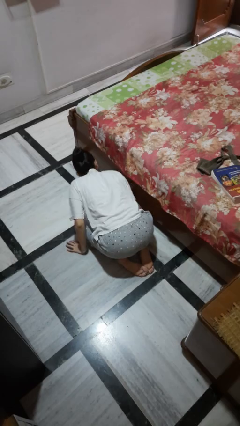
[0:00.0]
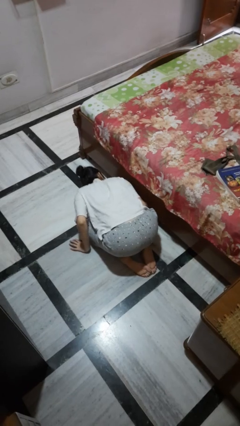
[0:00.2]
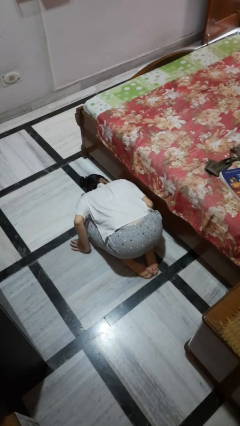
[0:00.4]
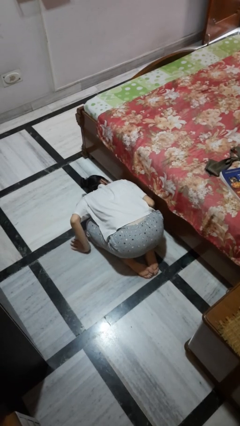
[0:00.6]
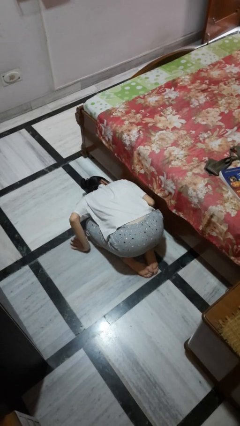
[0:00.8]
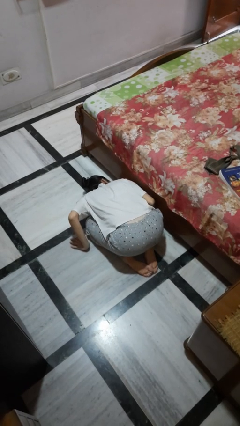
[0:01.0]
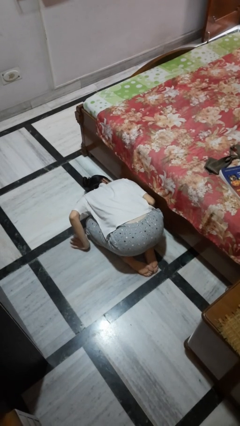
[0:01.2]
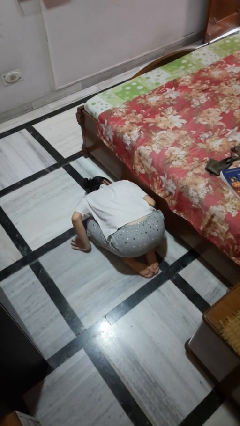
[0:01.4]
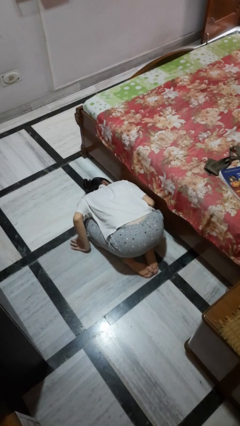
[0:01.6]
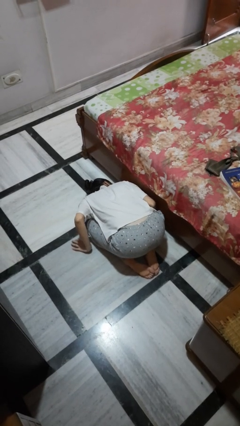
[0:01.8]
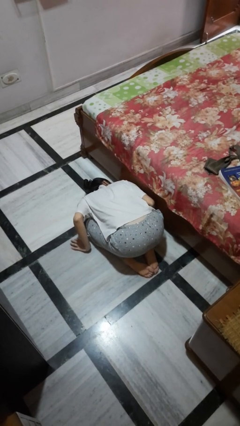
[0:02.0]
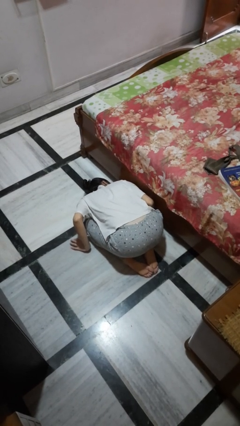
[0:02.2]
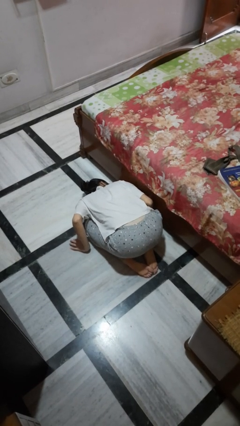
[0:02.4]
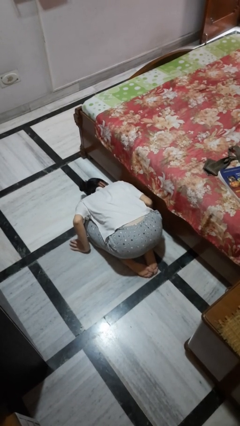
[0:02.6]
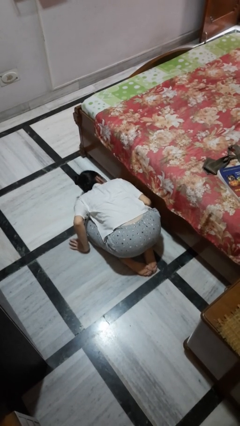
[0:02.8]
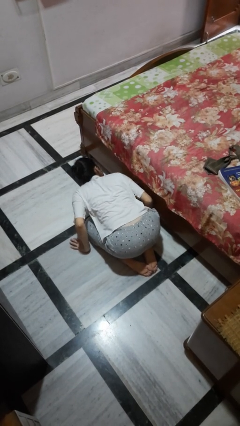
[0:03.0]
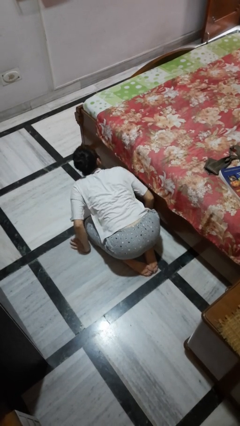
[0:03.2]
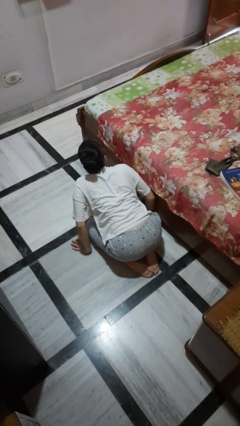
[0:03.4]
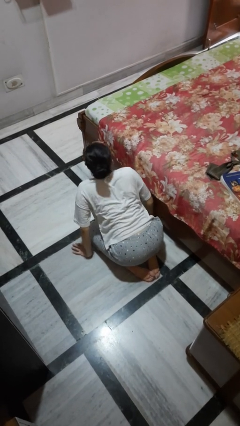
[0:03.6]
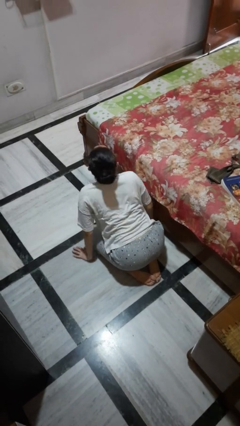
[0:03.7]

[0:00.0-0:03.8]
person searches under bed

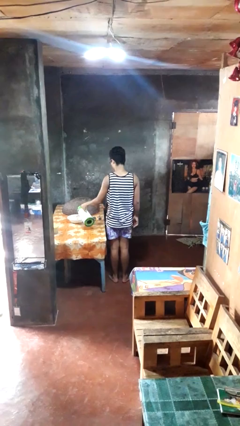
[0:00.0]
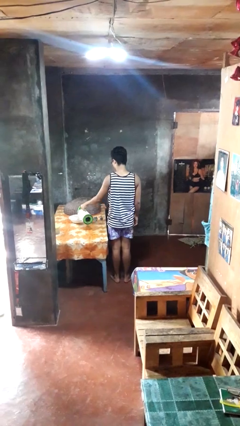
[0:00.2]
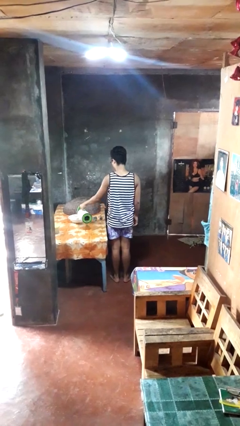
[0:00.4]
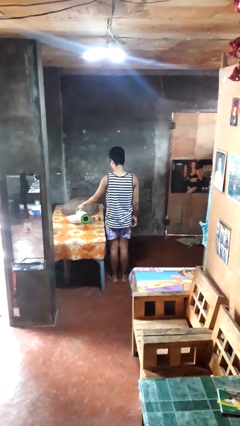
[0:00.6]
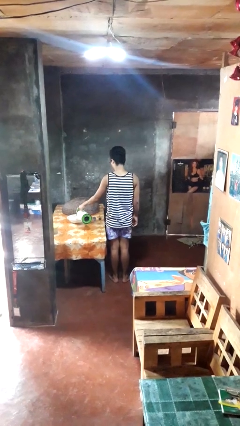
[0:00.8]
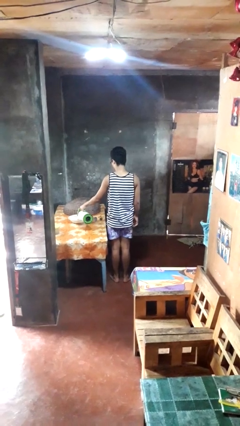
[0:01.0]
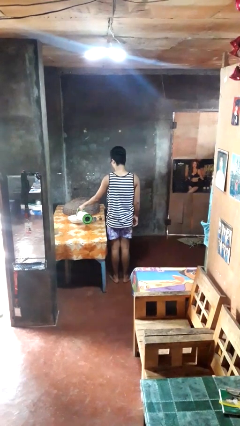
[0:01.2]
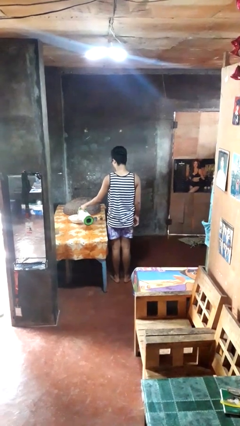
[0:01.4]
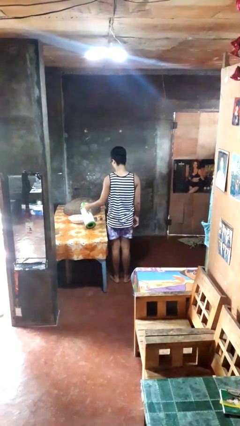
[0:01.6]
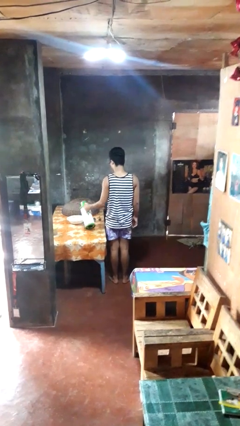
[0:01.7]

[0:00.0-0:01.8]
person pours into bowl

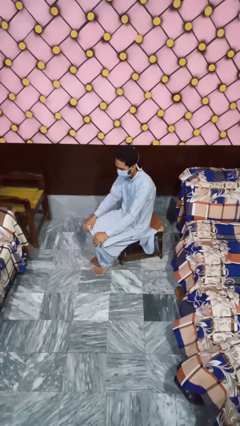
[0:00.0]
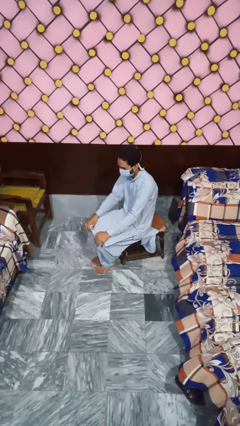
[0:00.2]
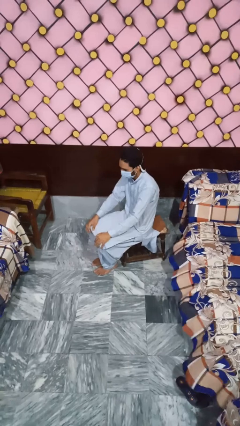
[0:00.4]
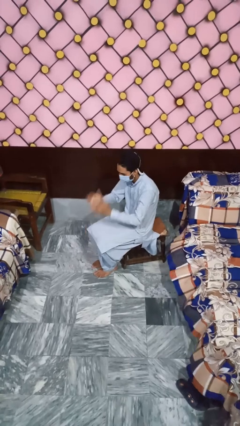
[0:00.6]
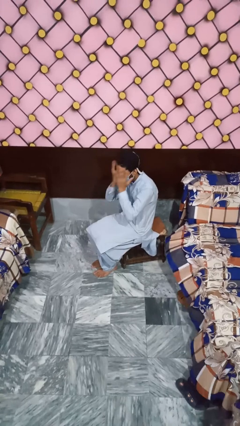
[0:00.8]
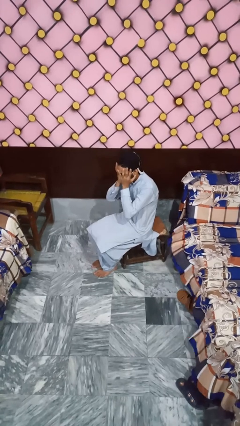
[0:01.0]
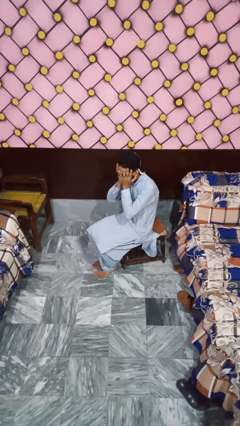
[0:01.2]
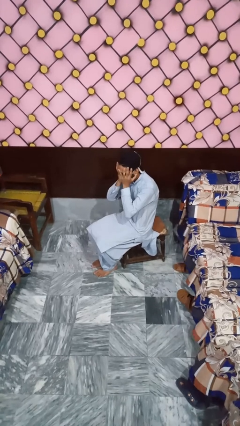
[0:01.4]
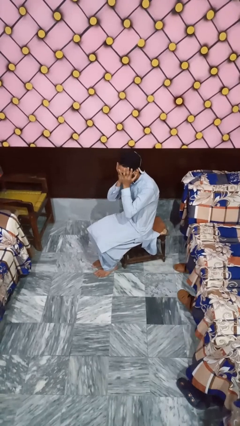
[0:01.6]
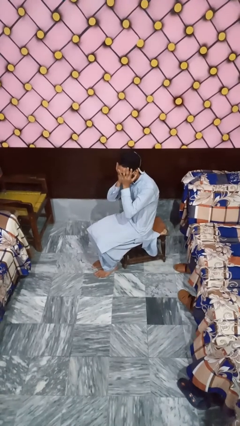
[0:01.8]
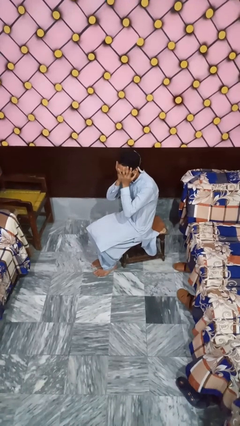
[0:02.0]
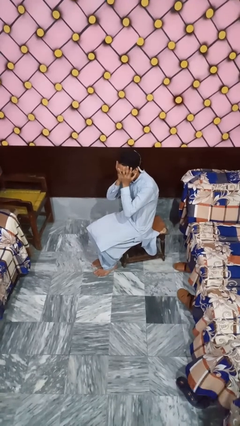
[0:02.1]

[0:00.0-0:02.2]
person covers face with hands

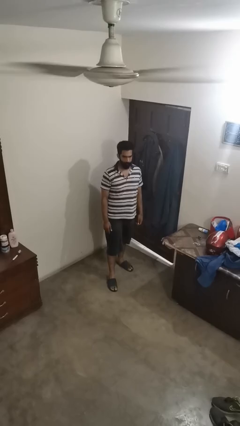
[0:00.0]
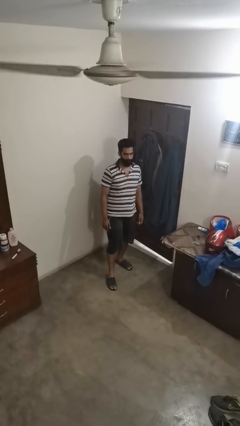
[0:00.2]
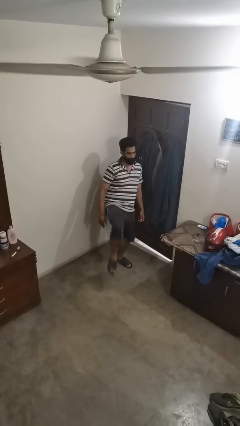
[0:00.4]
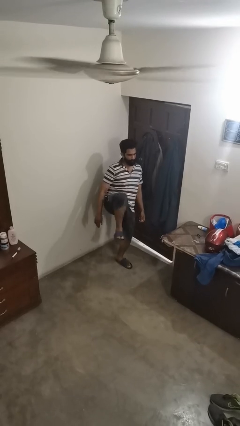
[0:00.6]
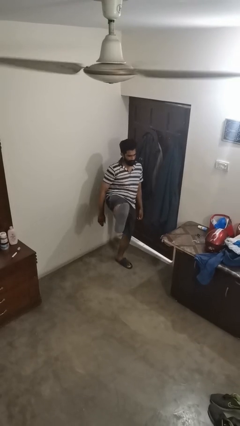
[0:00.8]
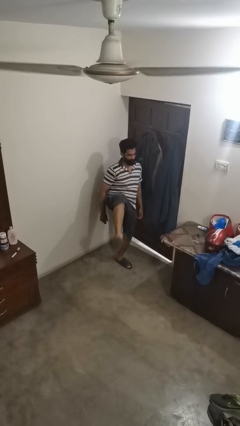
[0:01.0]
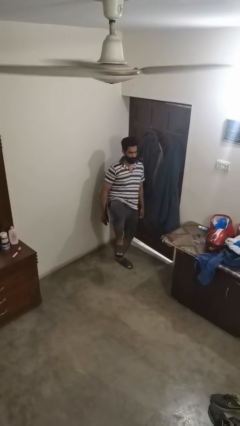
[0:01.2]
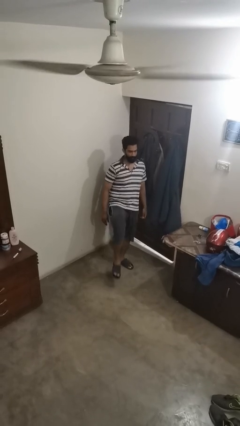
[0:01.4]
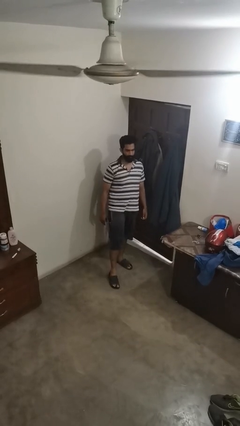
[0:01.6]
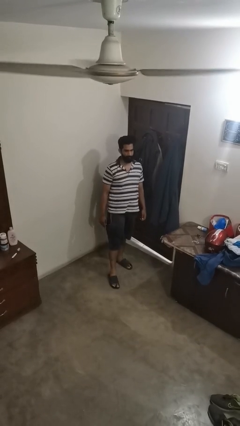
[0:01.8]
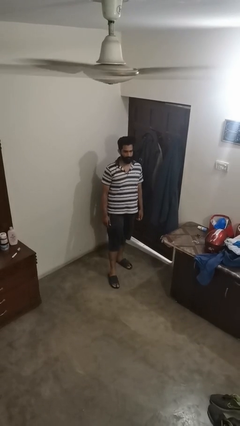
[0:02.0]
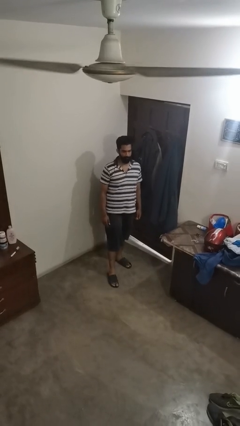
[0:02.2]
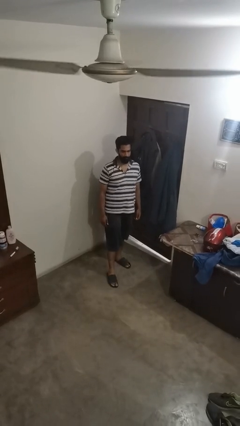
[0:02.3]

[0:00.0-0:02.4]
person karate kicks

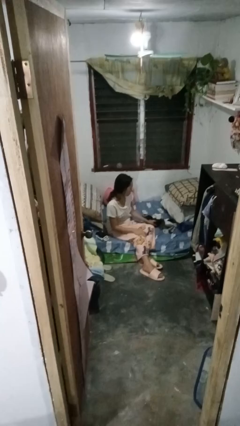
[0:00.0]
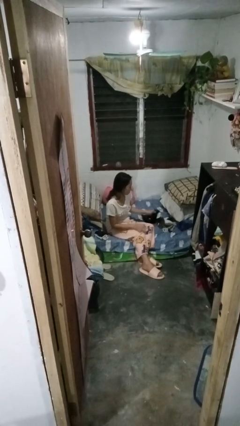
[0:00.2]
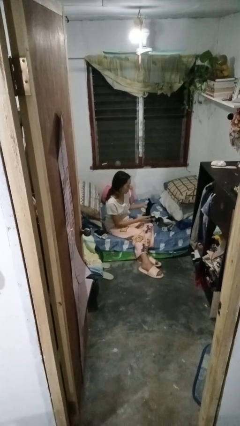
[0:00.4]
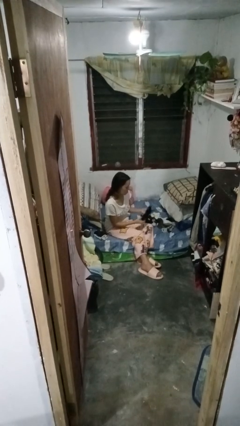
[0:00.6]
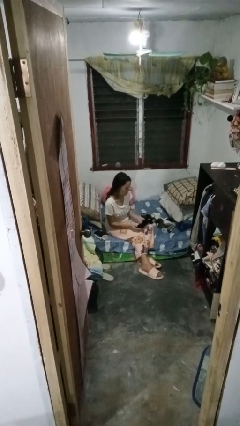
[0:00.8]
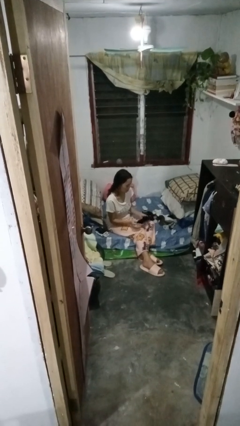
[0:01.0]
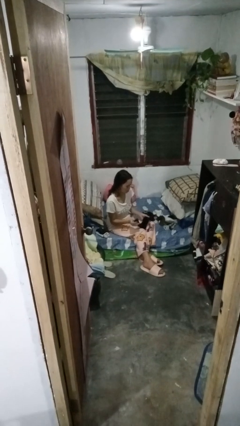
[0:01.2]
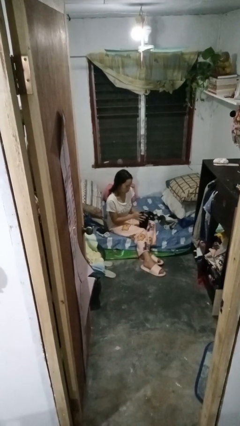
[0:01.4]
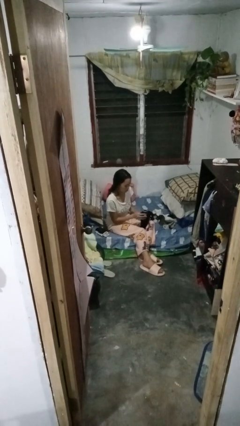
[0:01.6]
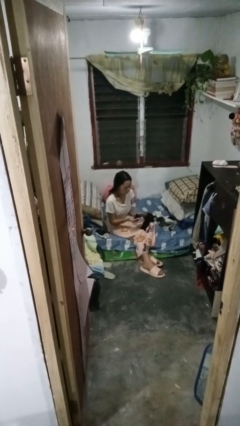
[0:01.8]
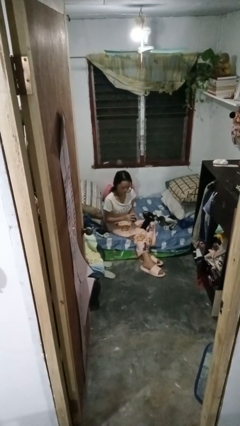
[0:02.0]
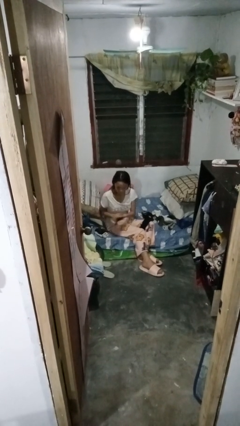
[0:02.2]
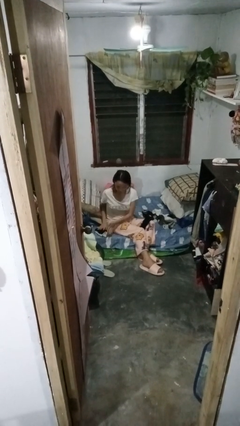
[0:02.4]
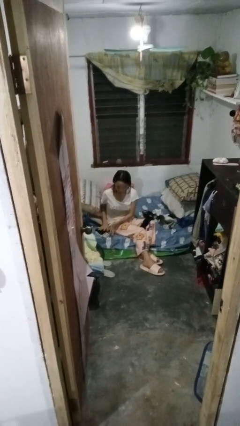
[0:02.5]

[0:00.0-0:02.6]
person folds socks

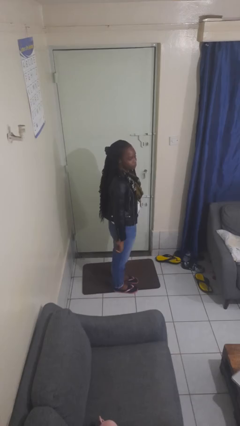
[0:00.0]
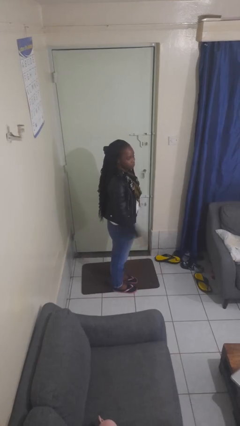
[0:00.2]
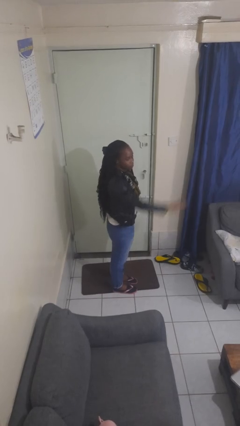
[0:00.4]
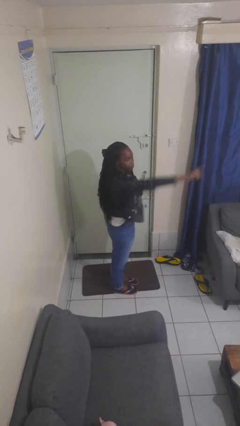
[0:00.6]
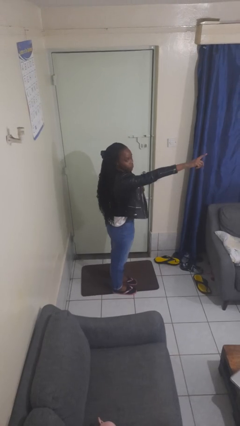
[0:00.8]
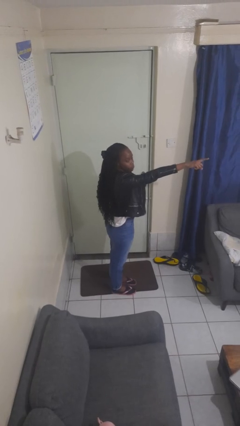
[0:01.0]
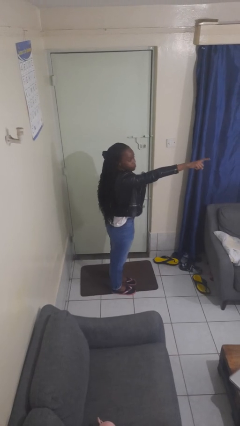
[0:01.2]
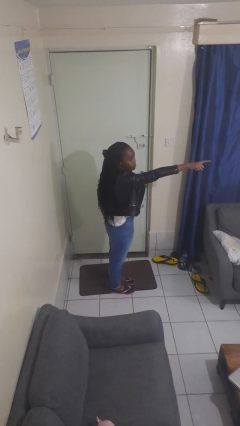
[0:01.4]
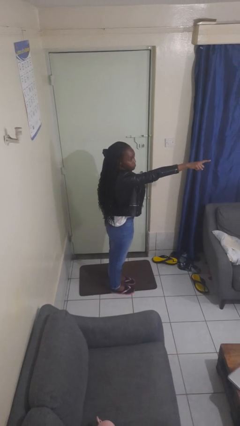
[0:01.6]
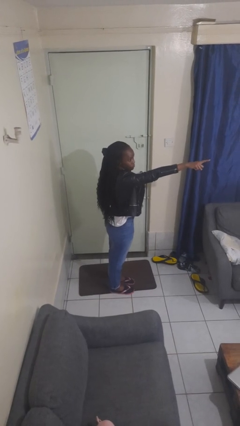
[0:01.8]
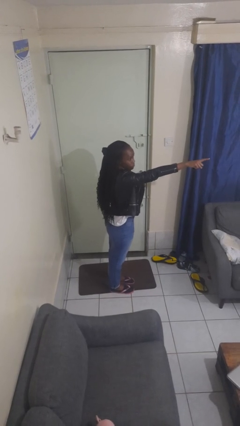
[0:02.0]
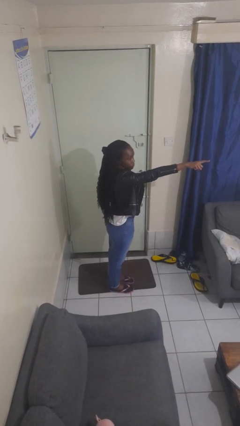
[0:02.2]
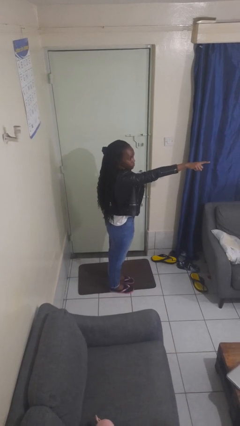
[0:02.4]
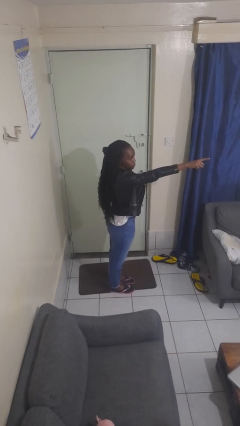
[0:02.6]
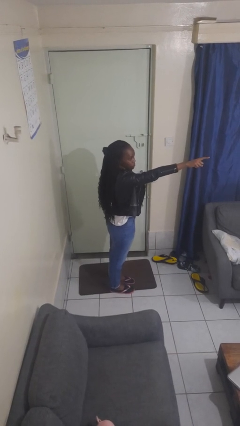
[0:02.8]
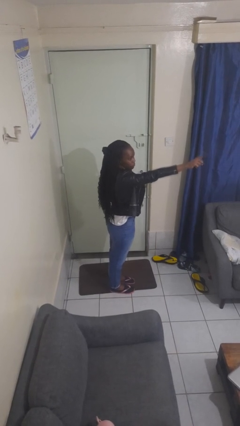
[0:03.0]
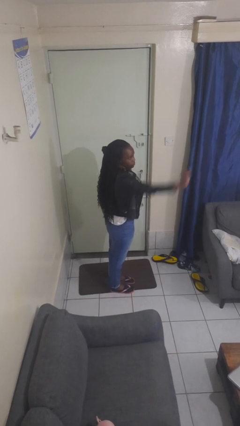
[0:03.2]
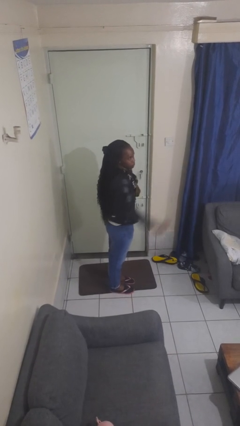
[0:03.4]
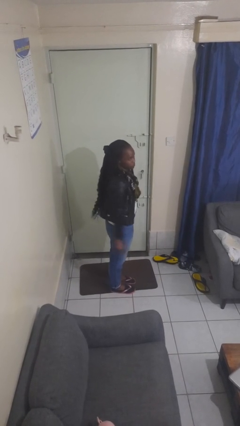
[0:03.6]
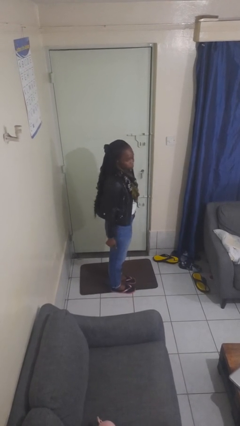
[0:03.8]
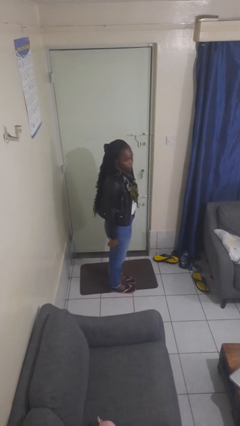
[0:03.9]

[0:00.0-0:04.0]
person points at person

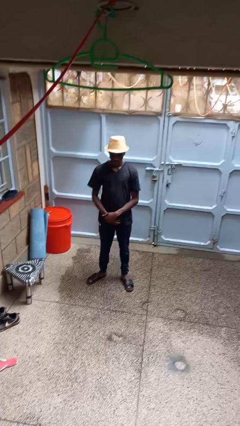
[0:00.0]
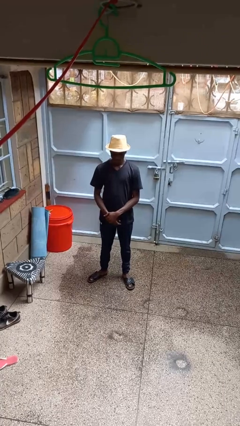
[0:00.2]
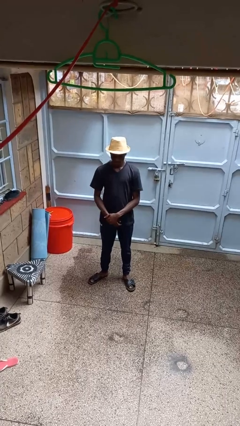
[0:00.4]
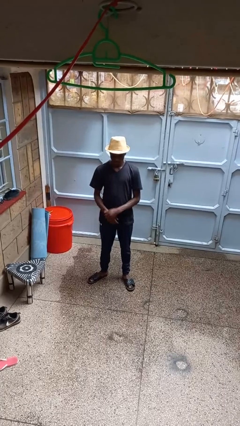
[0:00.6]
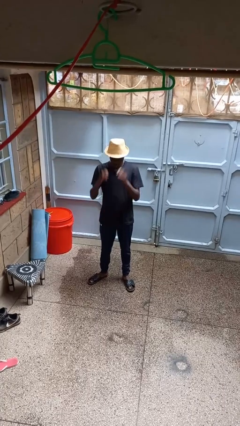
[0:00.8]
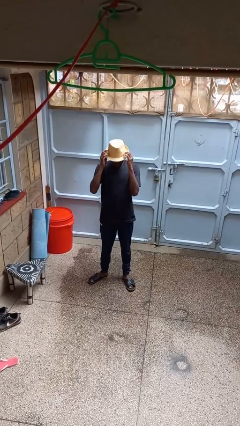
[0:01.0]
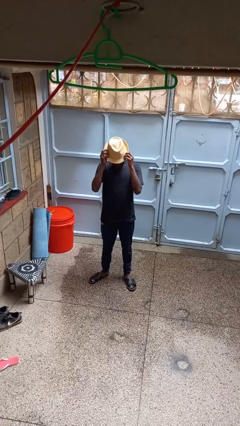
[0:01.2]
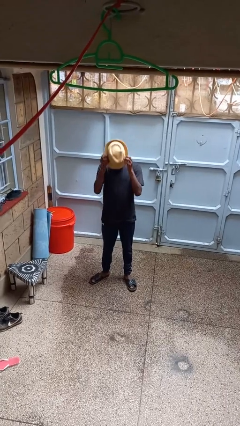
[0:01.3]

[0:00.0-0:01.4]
person takes off hat
